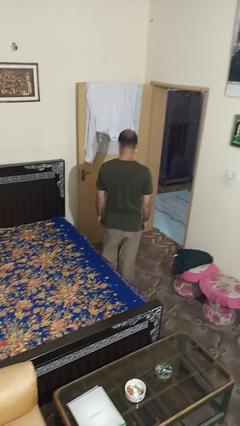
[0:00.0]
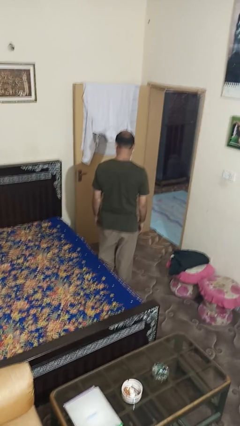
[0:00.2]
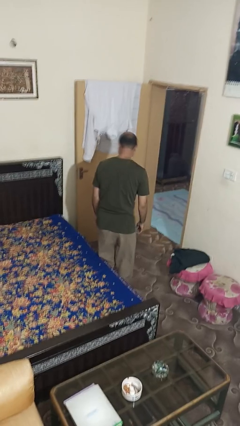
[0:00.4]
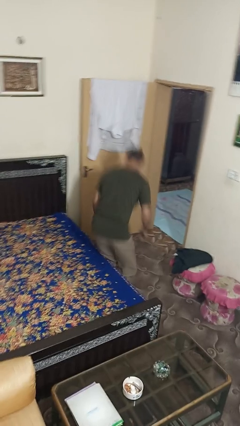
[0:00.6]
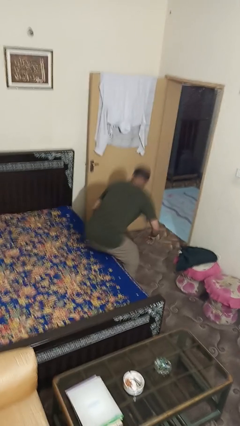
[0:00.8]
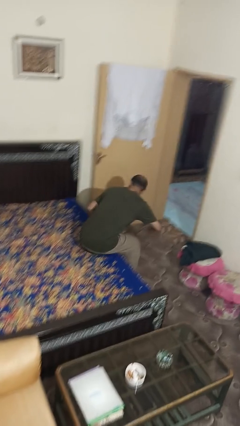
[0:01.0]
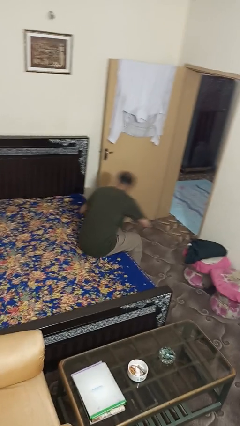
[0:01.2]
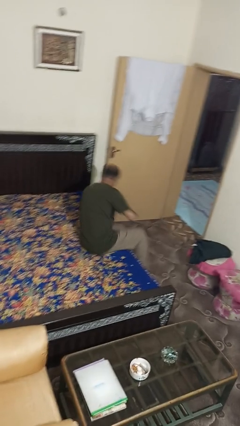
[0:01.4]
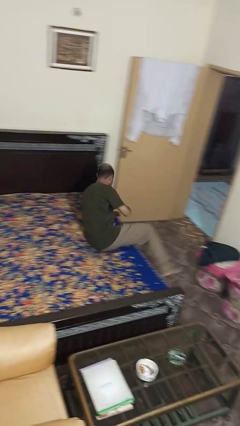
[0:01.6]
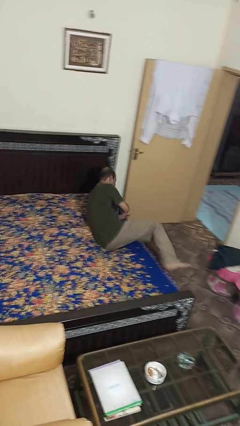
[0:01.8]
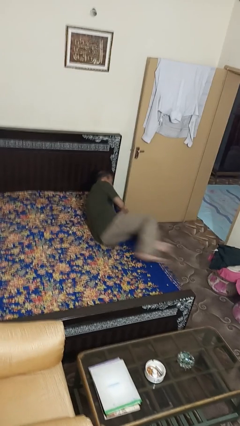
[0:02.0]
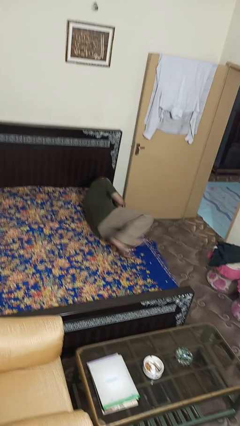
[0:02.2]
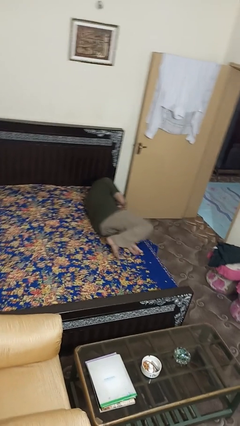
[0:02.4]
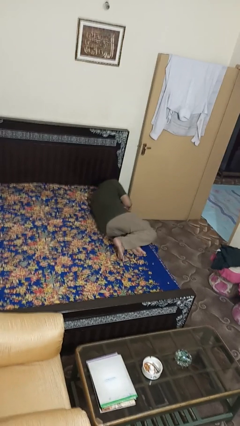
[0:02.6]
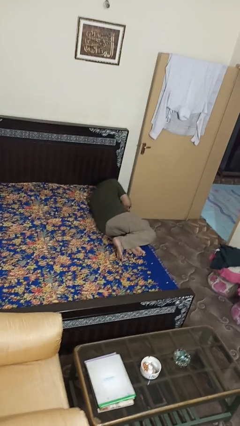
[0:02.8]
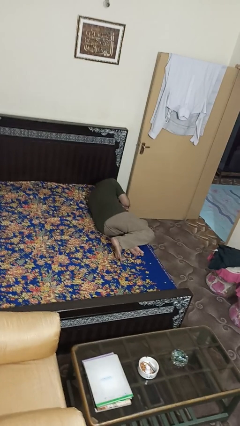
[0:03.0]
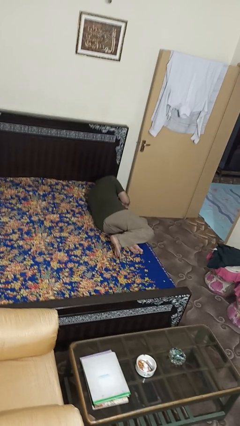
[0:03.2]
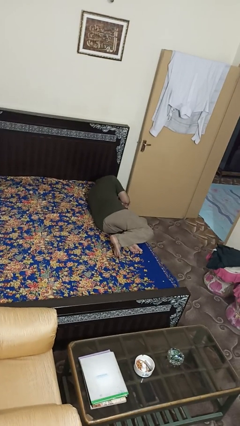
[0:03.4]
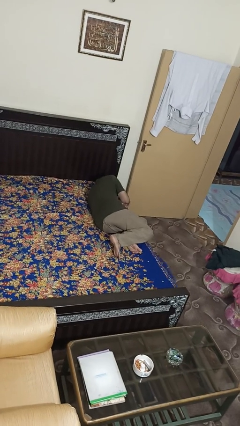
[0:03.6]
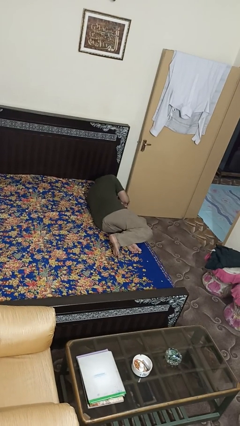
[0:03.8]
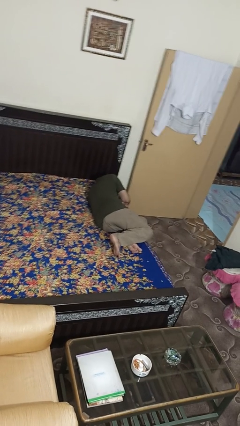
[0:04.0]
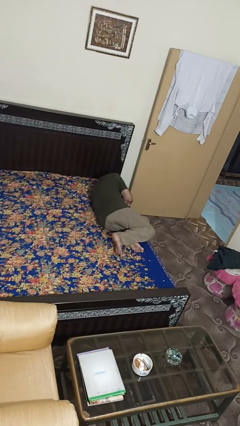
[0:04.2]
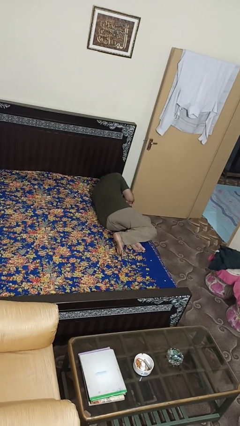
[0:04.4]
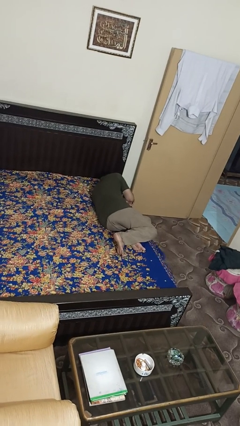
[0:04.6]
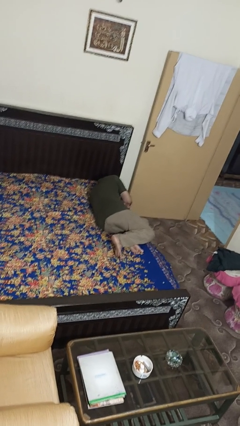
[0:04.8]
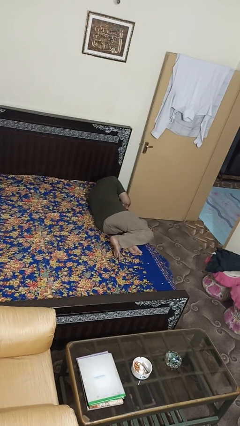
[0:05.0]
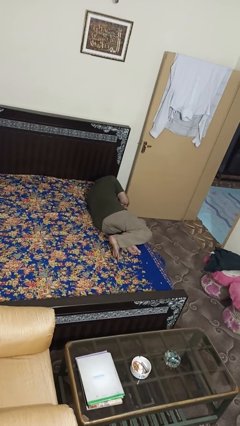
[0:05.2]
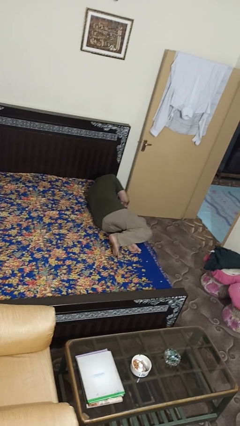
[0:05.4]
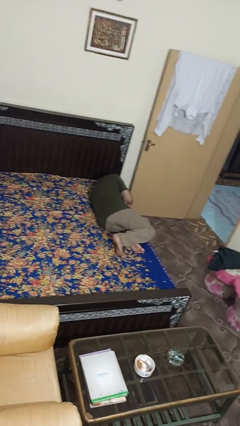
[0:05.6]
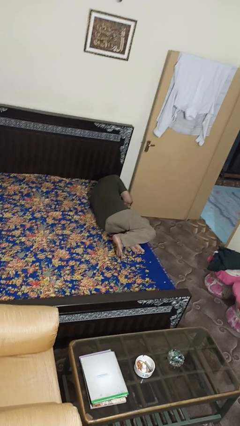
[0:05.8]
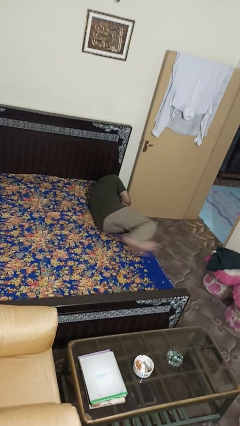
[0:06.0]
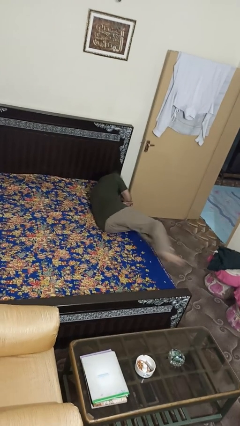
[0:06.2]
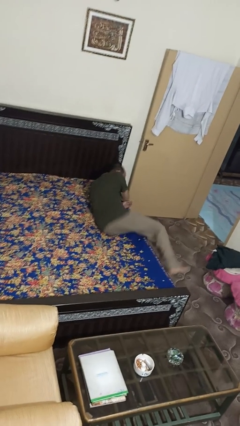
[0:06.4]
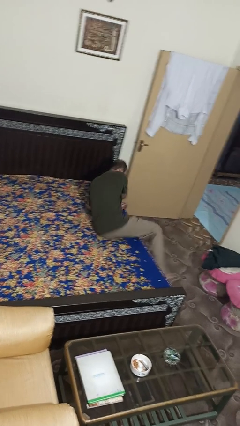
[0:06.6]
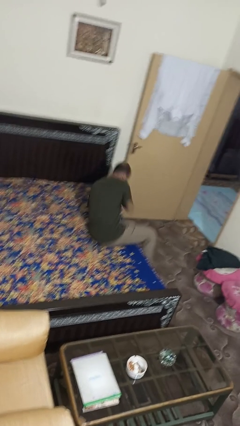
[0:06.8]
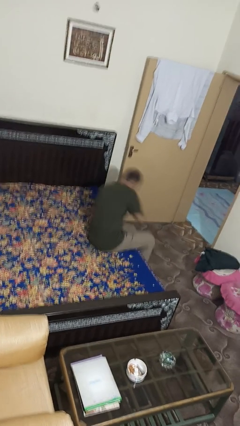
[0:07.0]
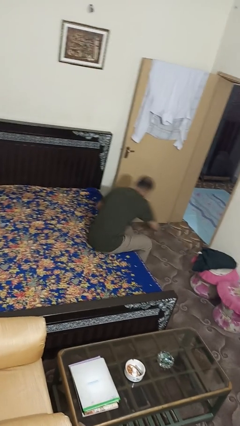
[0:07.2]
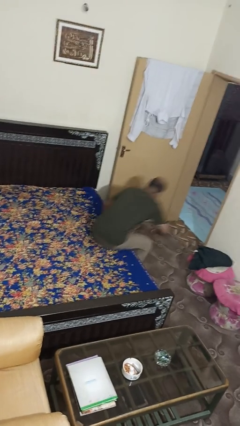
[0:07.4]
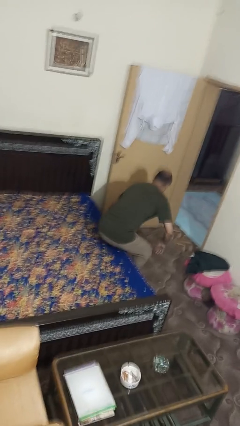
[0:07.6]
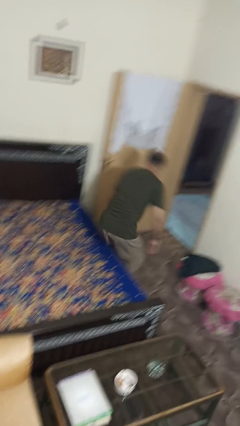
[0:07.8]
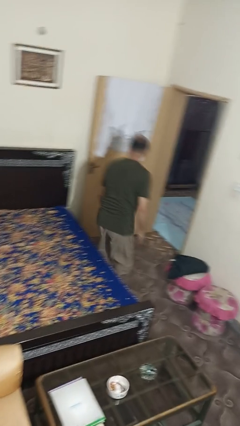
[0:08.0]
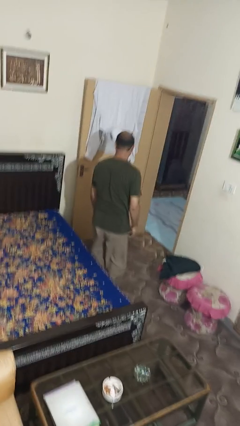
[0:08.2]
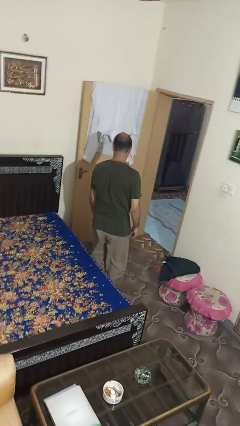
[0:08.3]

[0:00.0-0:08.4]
person lies down on bed

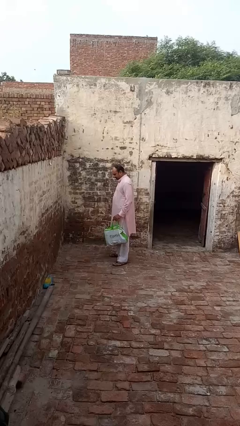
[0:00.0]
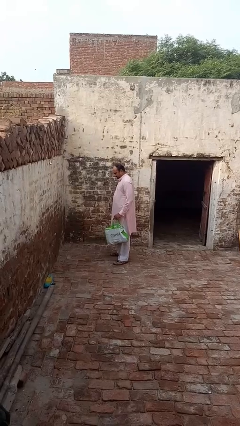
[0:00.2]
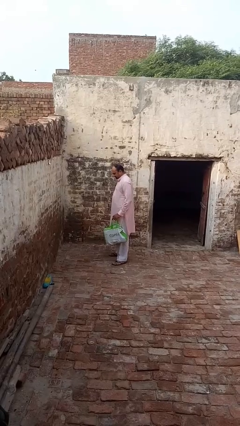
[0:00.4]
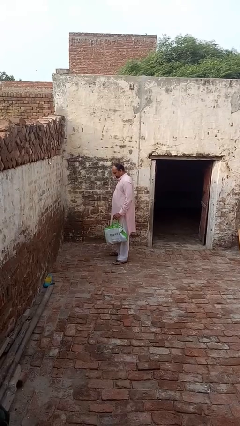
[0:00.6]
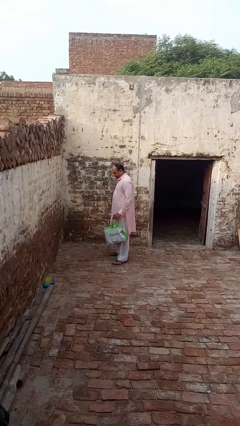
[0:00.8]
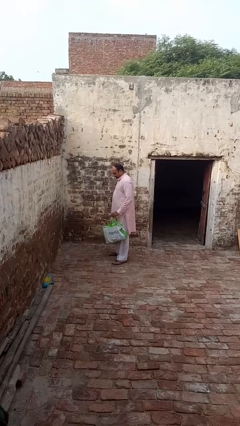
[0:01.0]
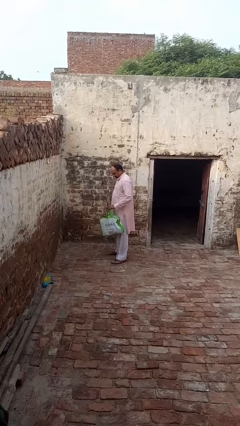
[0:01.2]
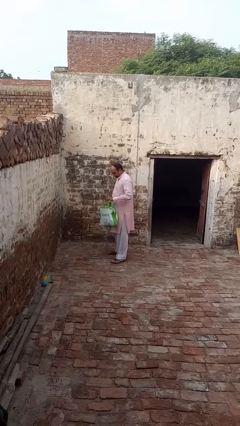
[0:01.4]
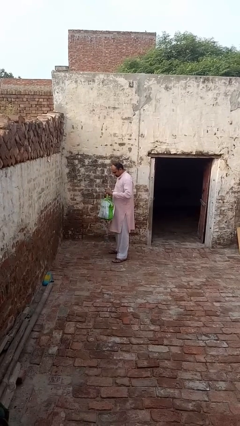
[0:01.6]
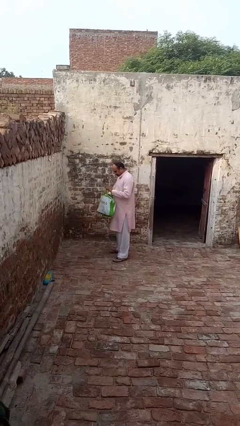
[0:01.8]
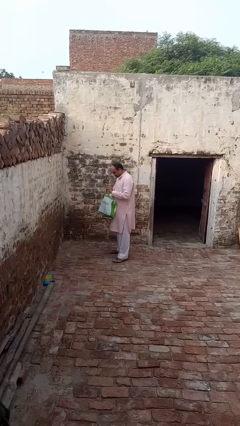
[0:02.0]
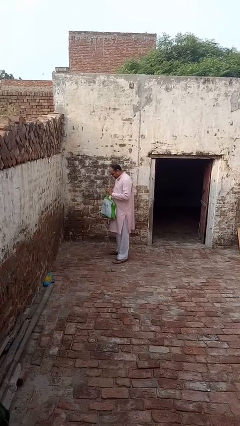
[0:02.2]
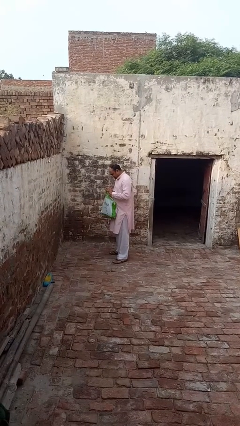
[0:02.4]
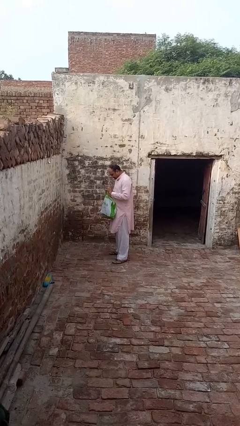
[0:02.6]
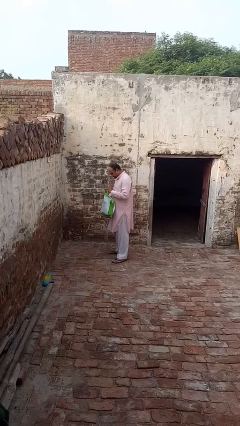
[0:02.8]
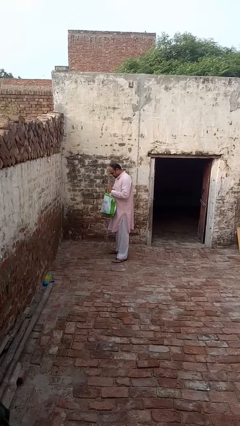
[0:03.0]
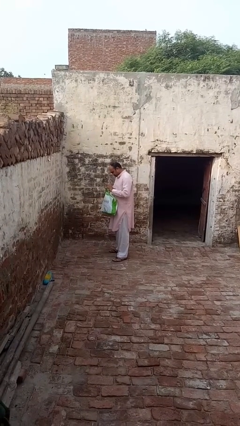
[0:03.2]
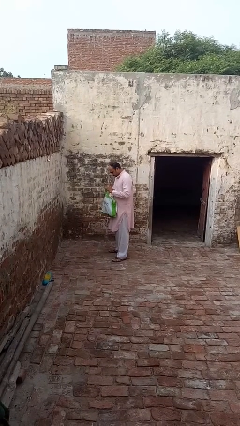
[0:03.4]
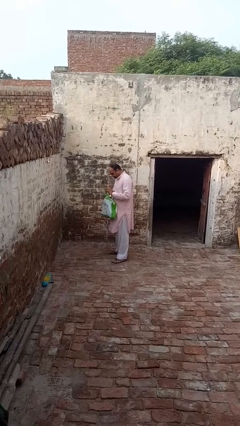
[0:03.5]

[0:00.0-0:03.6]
person searches in bag

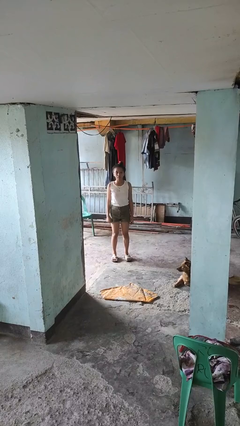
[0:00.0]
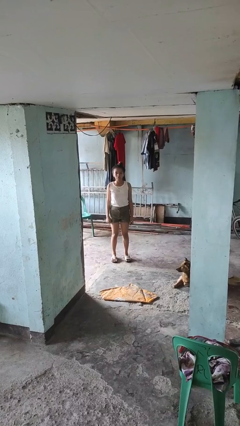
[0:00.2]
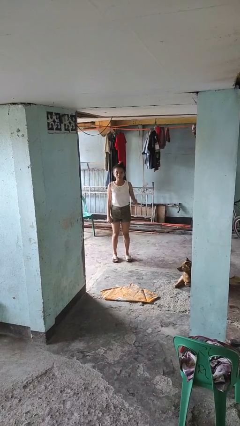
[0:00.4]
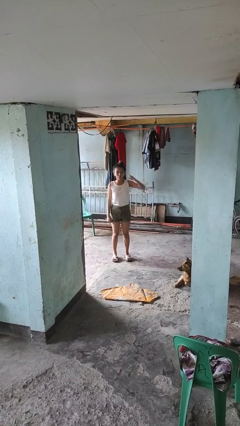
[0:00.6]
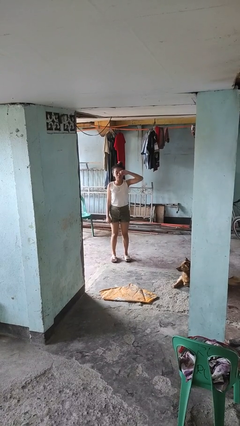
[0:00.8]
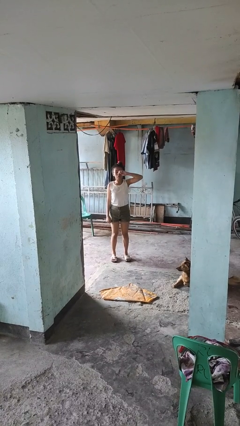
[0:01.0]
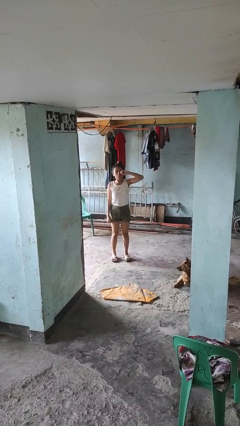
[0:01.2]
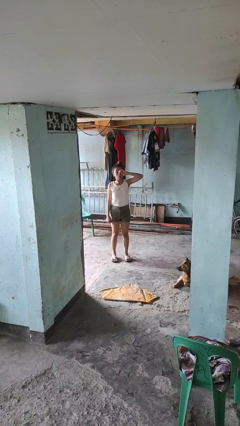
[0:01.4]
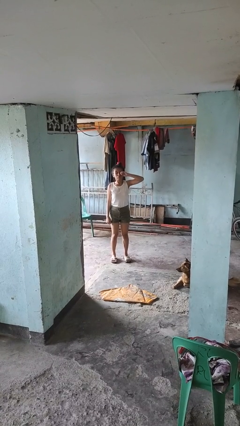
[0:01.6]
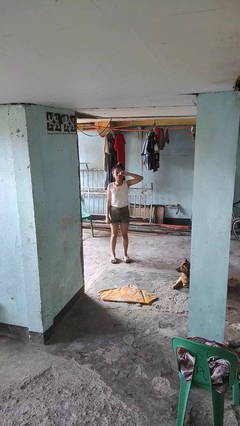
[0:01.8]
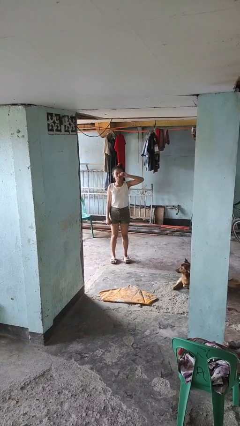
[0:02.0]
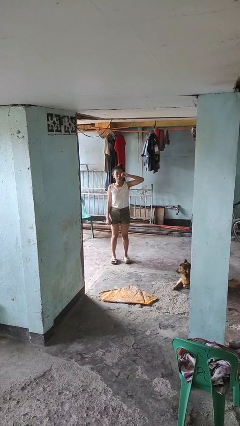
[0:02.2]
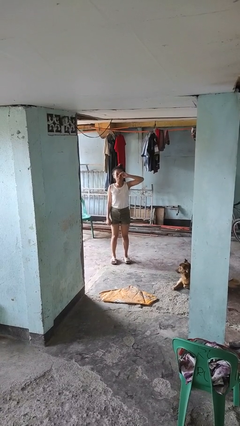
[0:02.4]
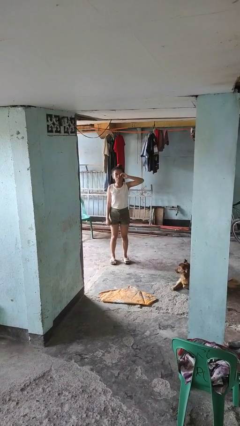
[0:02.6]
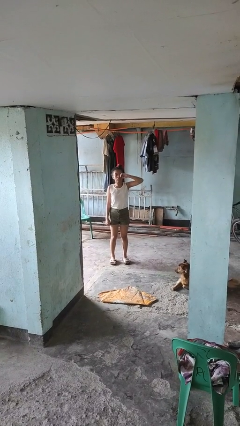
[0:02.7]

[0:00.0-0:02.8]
person rubs eyes

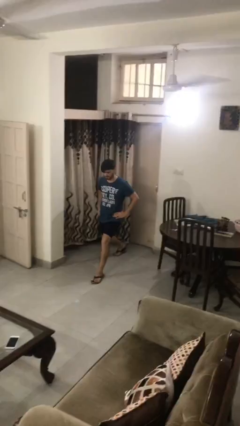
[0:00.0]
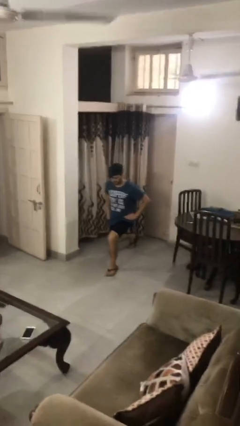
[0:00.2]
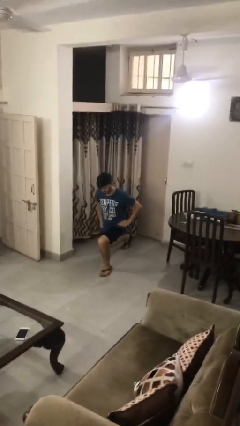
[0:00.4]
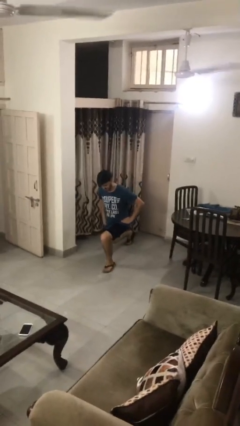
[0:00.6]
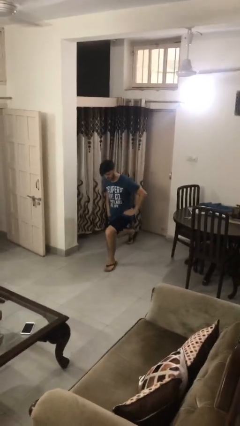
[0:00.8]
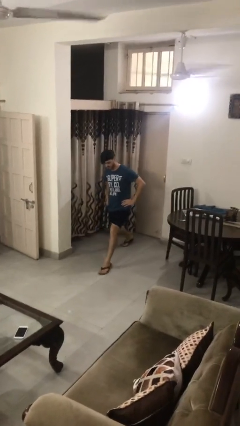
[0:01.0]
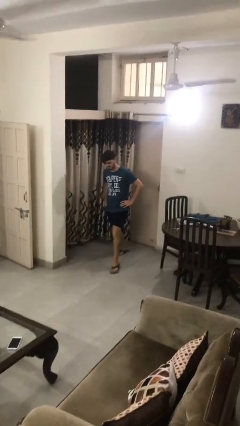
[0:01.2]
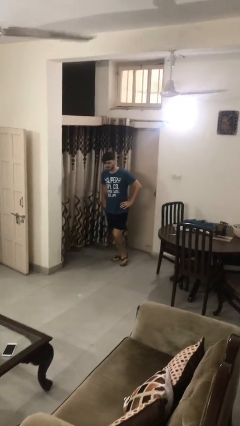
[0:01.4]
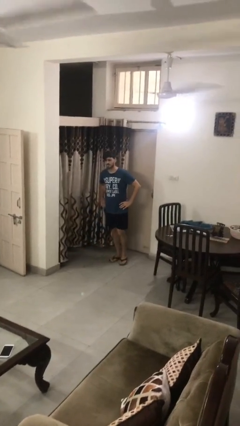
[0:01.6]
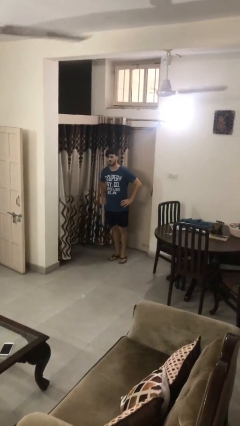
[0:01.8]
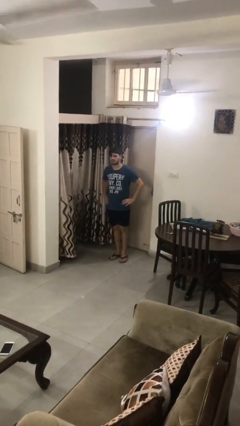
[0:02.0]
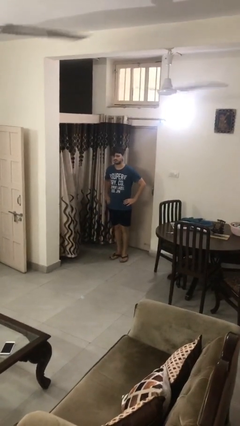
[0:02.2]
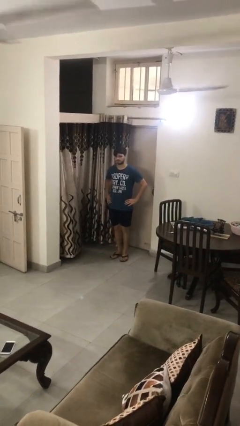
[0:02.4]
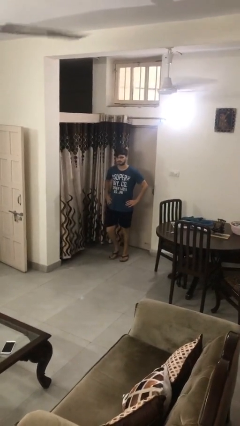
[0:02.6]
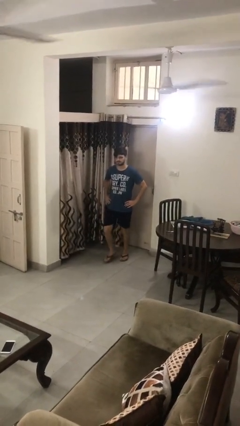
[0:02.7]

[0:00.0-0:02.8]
person exercises with lunges
